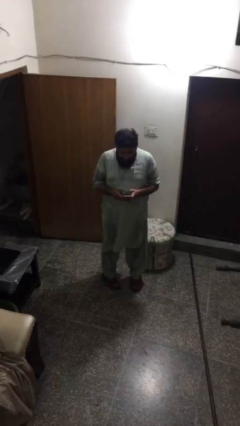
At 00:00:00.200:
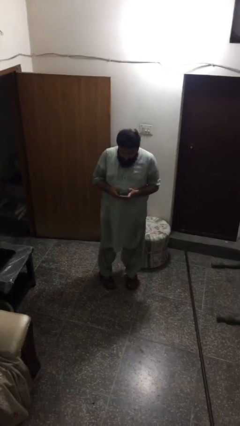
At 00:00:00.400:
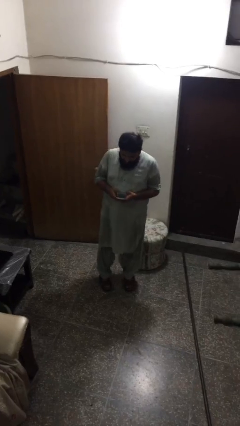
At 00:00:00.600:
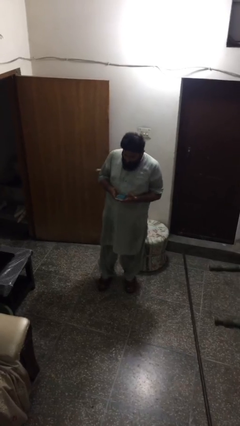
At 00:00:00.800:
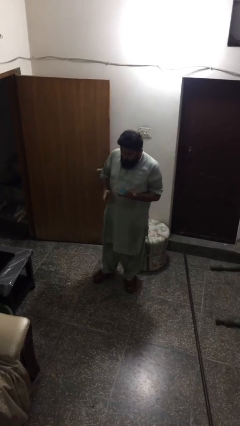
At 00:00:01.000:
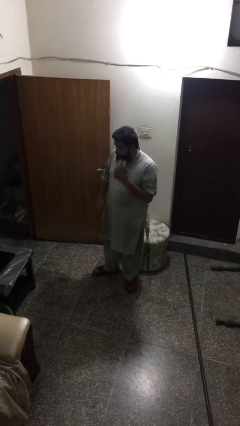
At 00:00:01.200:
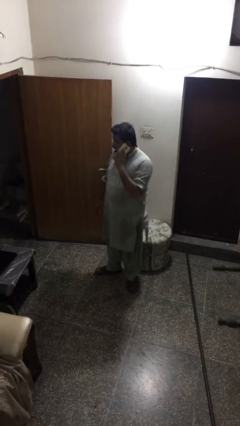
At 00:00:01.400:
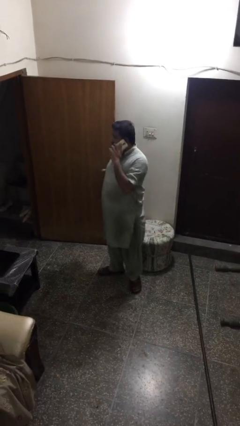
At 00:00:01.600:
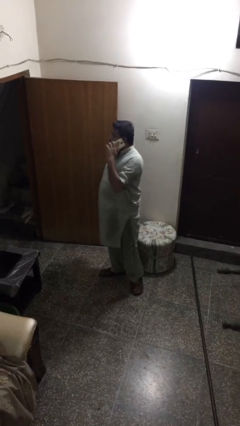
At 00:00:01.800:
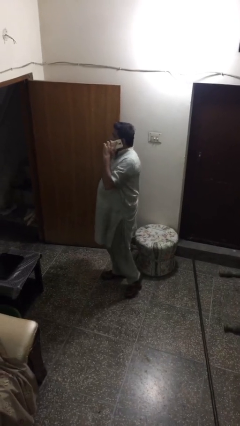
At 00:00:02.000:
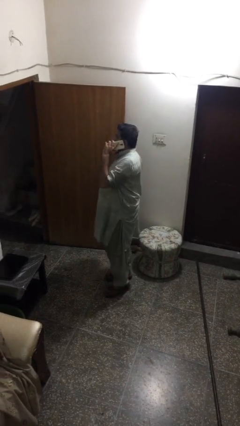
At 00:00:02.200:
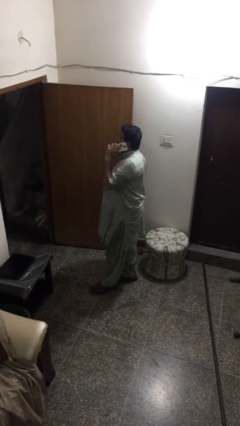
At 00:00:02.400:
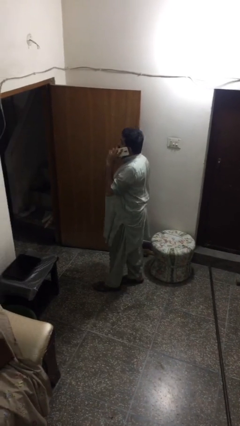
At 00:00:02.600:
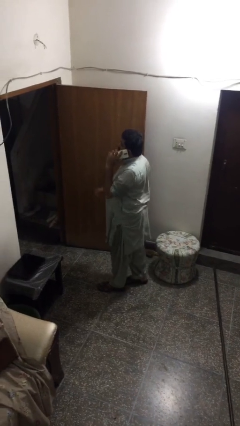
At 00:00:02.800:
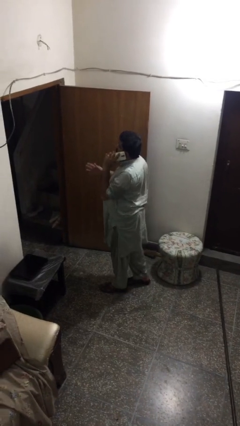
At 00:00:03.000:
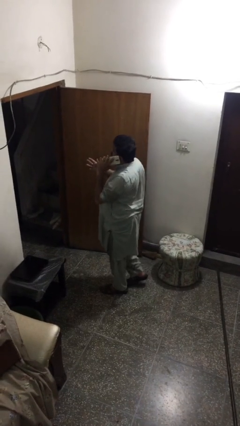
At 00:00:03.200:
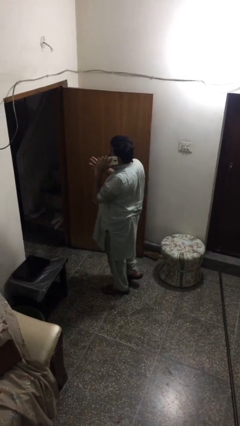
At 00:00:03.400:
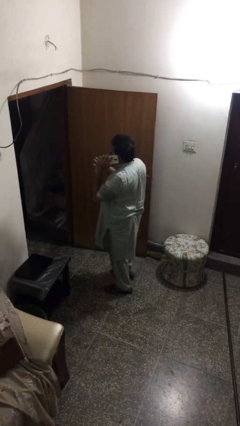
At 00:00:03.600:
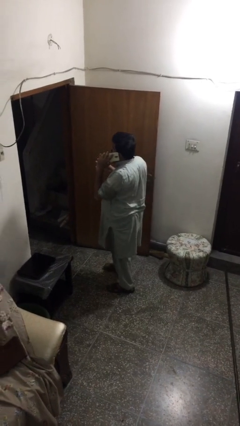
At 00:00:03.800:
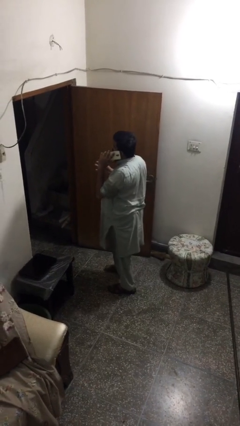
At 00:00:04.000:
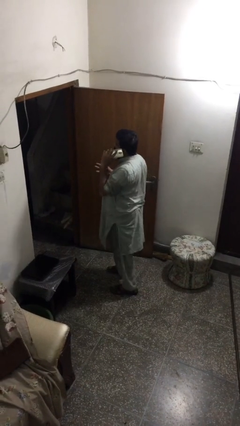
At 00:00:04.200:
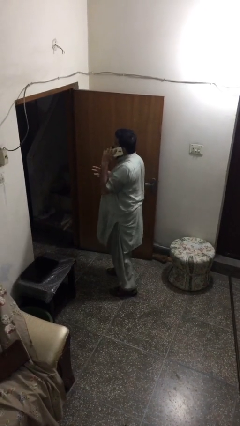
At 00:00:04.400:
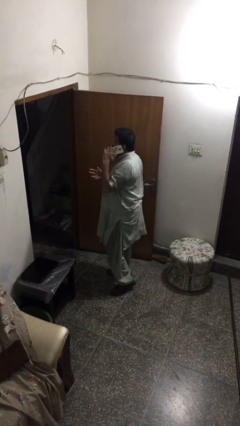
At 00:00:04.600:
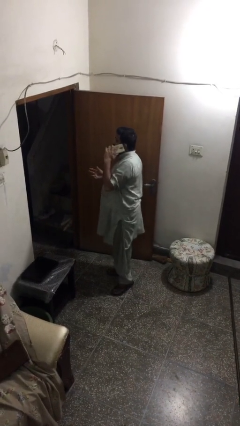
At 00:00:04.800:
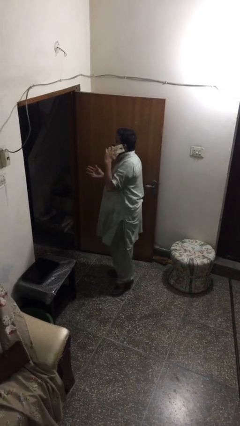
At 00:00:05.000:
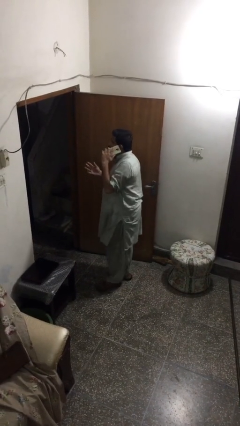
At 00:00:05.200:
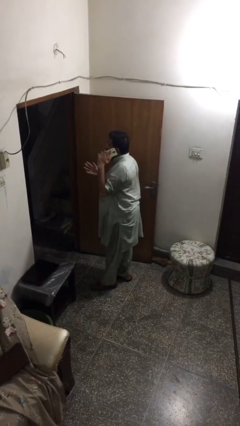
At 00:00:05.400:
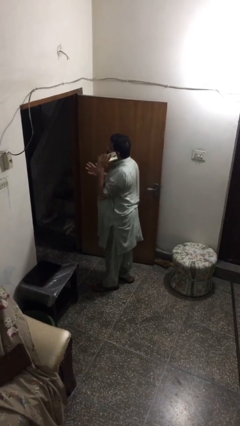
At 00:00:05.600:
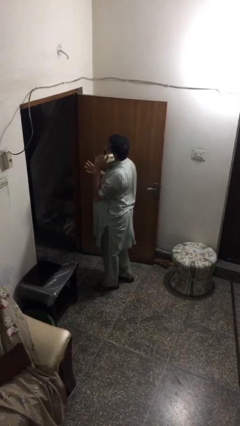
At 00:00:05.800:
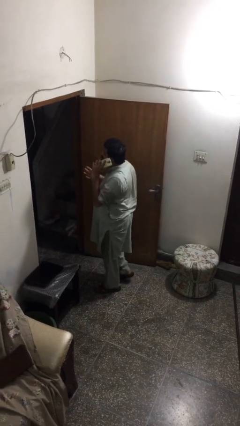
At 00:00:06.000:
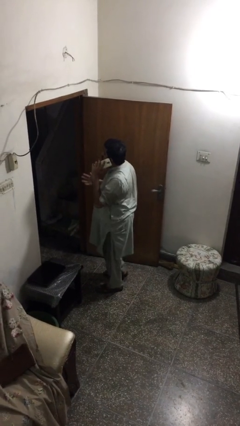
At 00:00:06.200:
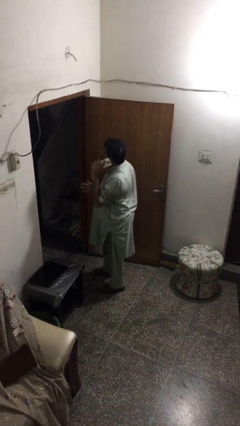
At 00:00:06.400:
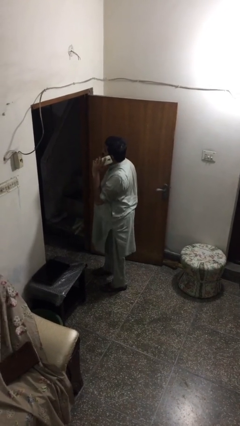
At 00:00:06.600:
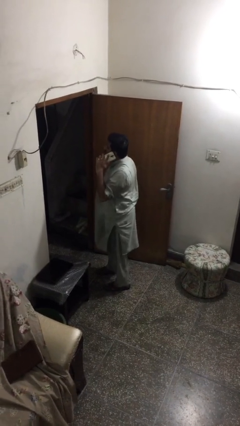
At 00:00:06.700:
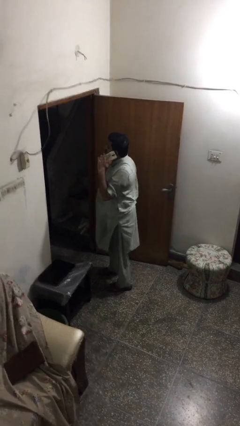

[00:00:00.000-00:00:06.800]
person talks on phone

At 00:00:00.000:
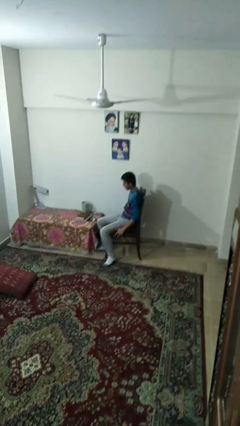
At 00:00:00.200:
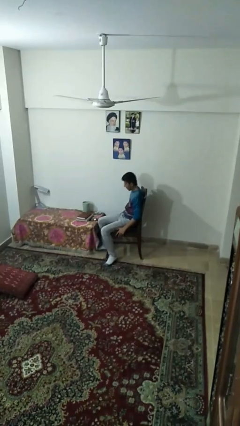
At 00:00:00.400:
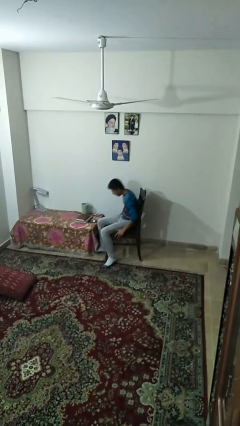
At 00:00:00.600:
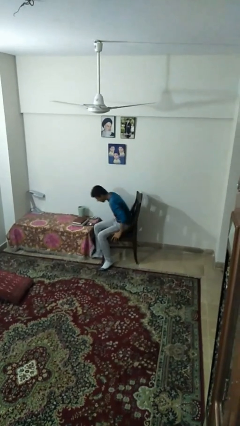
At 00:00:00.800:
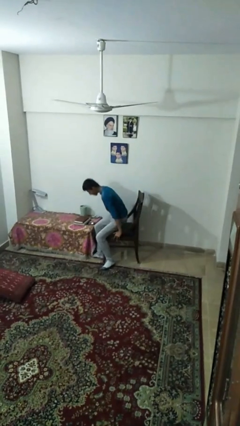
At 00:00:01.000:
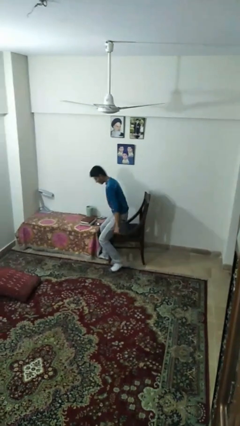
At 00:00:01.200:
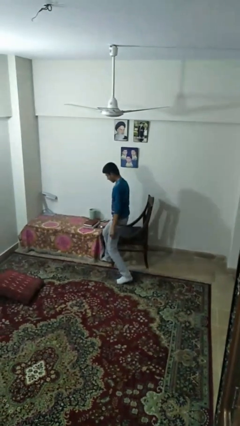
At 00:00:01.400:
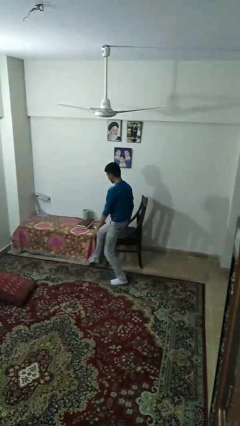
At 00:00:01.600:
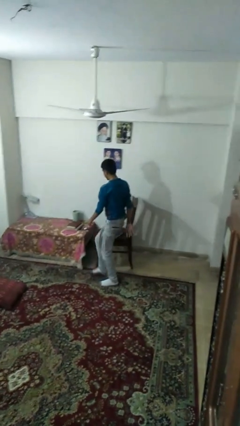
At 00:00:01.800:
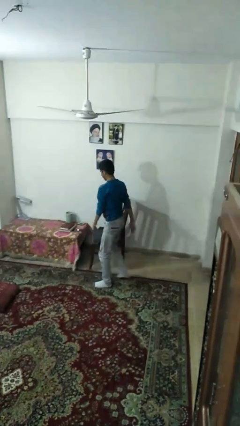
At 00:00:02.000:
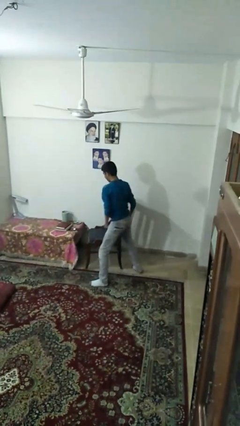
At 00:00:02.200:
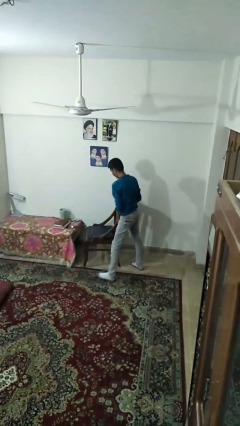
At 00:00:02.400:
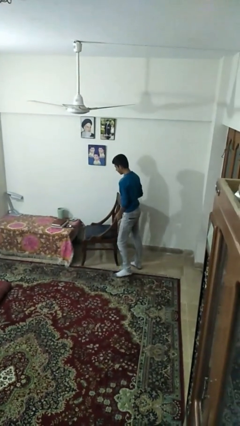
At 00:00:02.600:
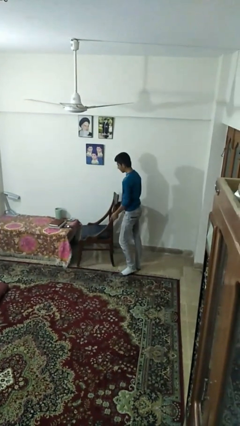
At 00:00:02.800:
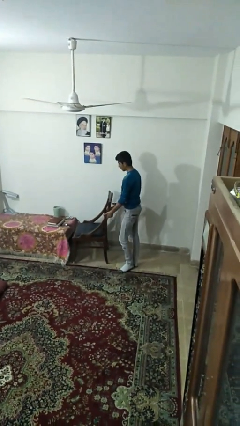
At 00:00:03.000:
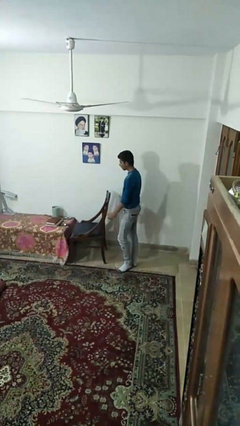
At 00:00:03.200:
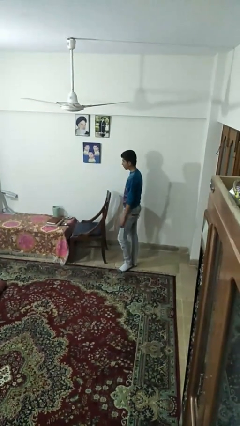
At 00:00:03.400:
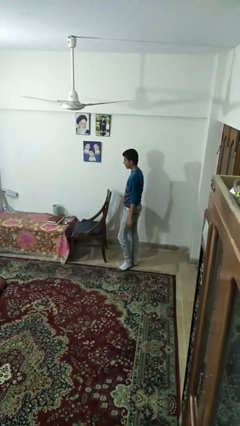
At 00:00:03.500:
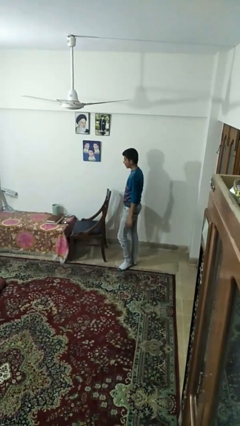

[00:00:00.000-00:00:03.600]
person stands up

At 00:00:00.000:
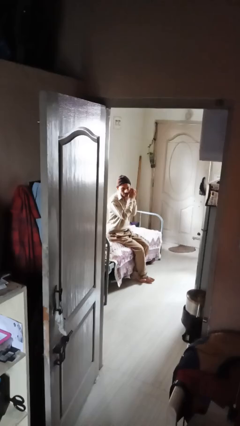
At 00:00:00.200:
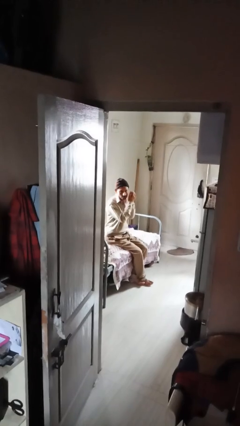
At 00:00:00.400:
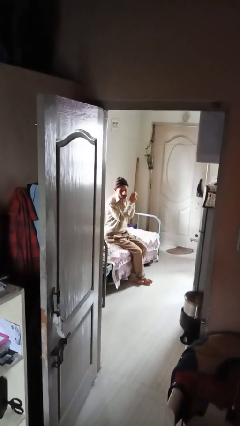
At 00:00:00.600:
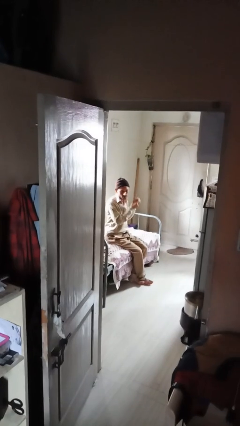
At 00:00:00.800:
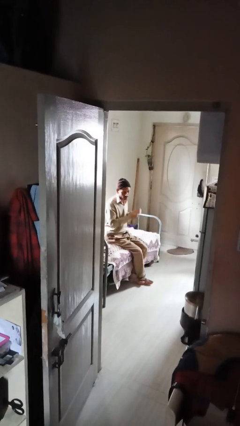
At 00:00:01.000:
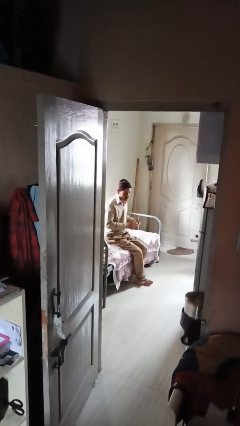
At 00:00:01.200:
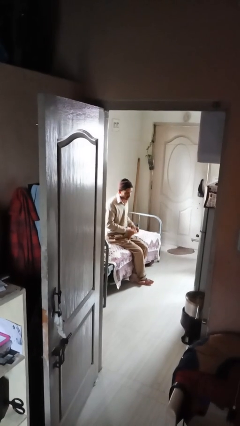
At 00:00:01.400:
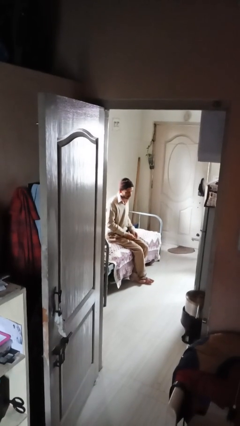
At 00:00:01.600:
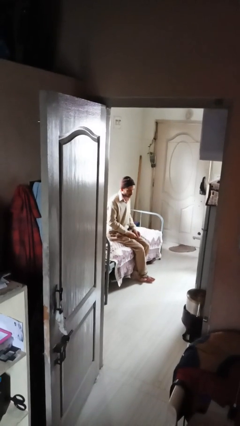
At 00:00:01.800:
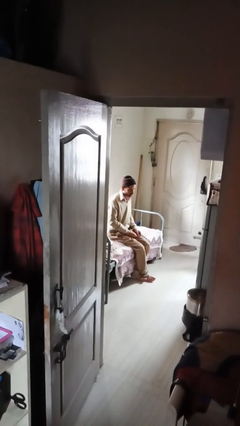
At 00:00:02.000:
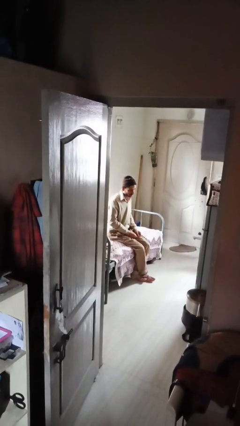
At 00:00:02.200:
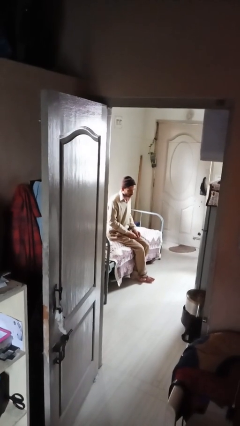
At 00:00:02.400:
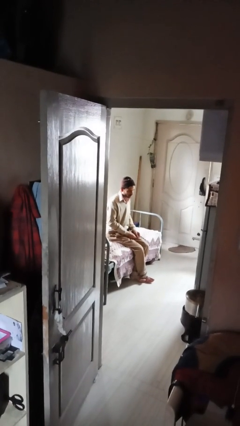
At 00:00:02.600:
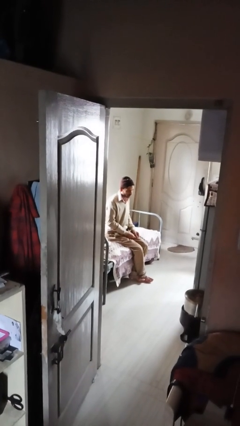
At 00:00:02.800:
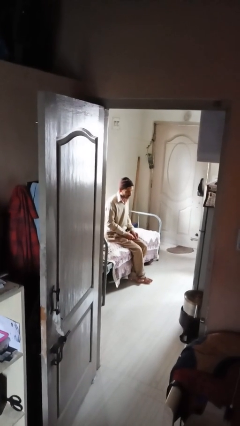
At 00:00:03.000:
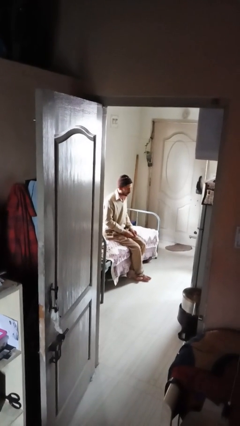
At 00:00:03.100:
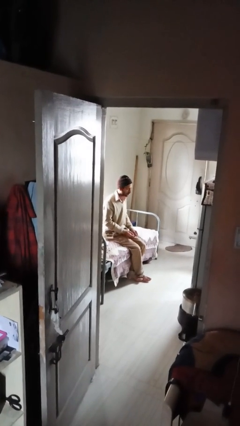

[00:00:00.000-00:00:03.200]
person takes off earrings

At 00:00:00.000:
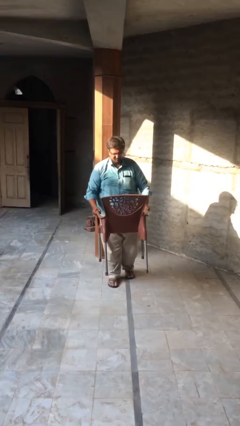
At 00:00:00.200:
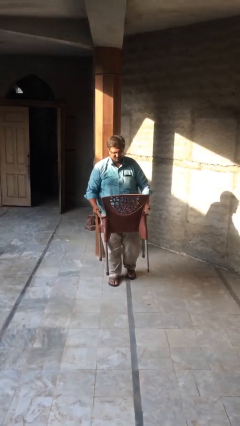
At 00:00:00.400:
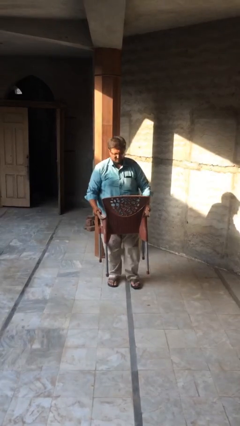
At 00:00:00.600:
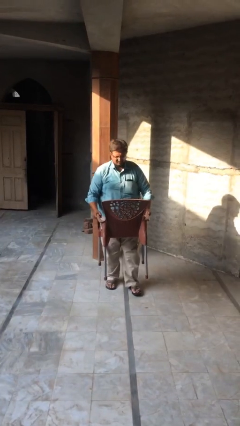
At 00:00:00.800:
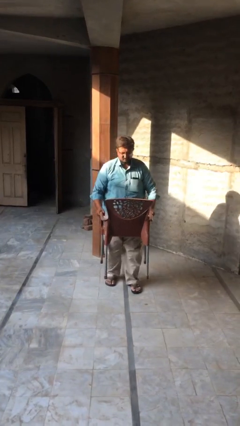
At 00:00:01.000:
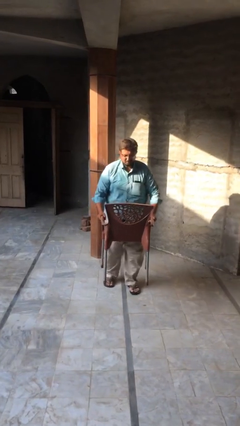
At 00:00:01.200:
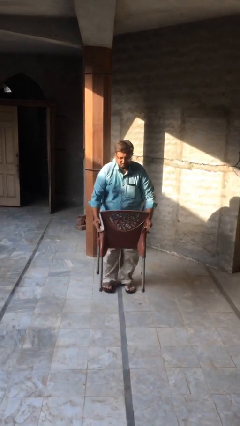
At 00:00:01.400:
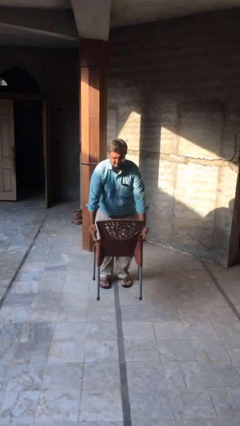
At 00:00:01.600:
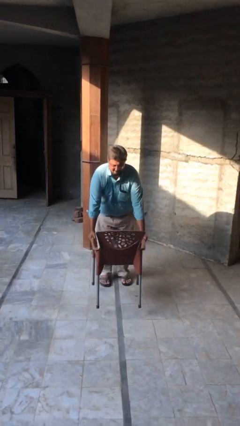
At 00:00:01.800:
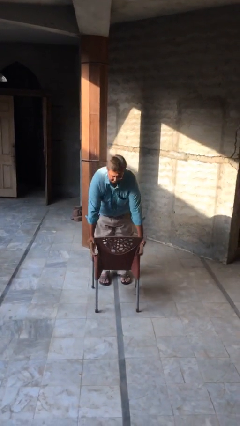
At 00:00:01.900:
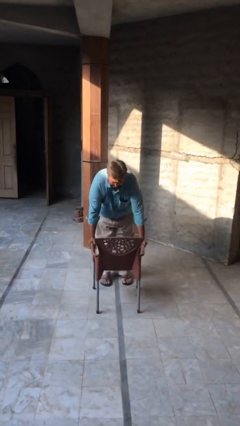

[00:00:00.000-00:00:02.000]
person puts down object on floor

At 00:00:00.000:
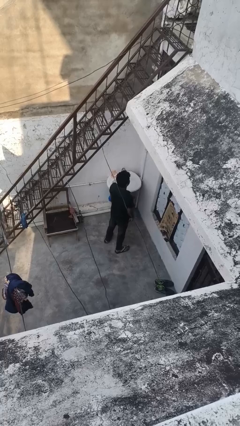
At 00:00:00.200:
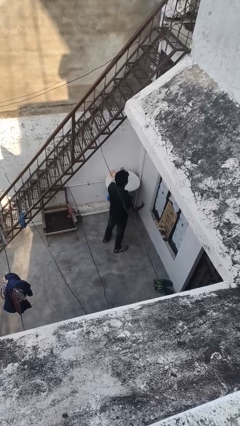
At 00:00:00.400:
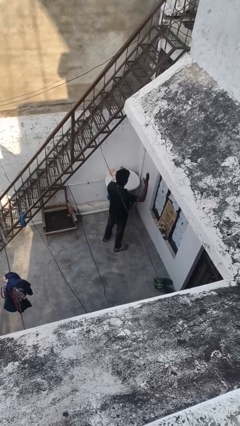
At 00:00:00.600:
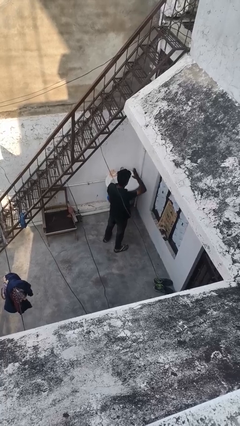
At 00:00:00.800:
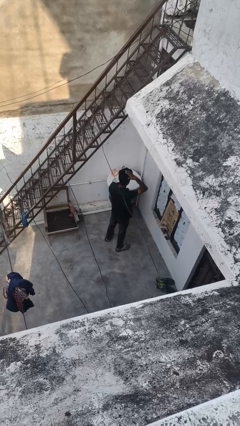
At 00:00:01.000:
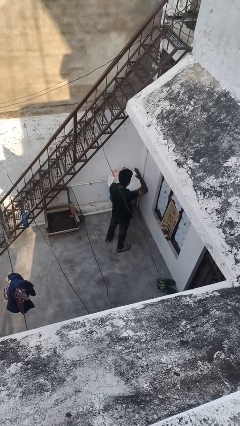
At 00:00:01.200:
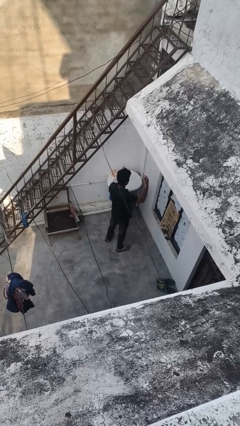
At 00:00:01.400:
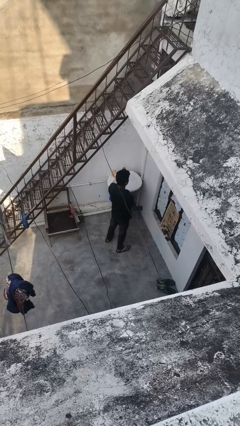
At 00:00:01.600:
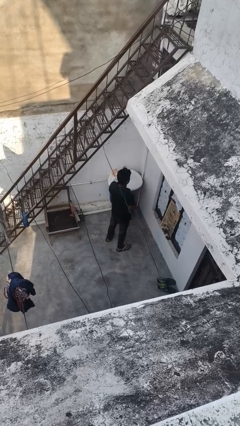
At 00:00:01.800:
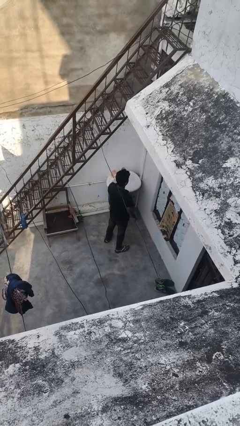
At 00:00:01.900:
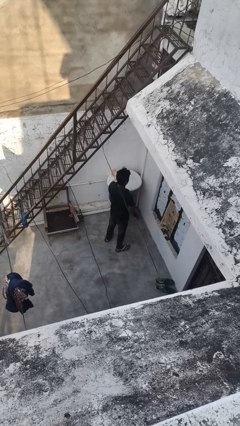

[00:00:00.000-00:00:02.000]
person pats head
